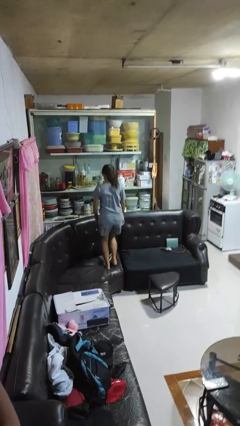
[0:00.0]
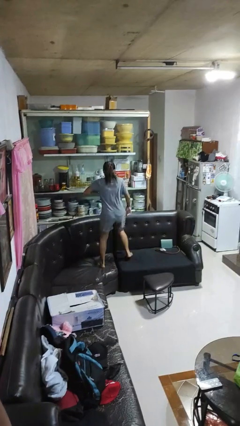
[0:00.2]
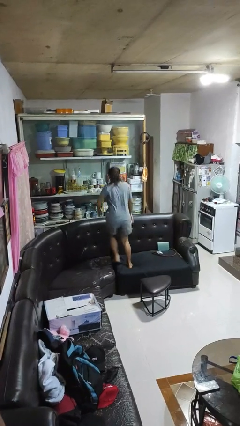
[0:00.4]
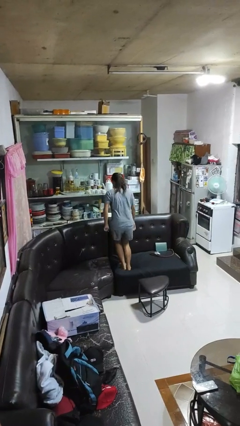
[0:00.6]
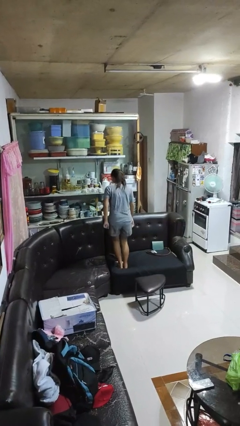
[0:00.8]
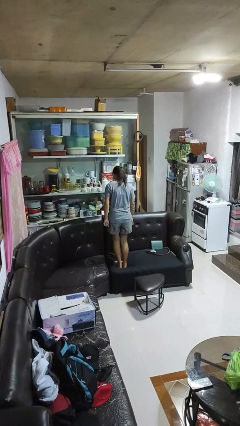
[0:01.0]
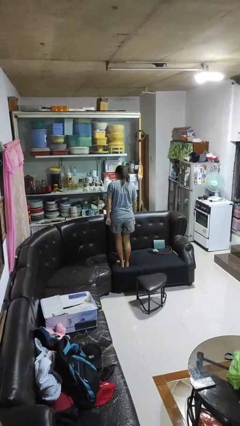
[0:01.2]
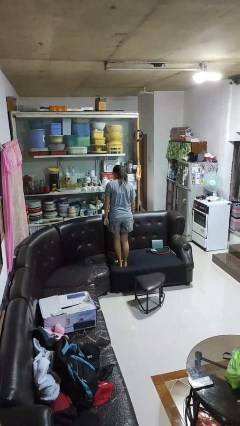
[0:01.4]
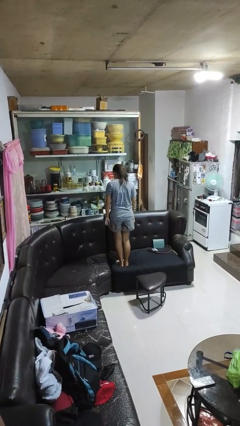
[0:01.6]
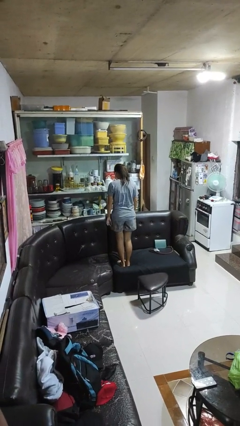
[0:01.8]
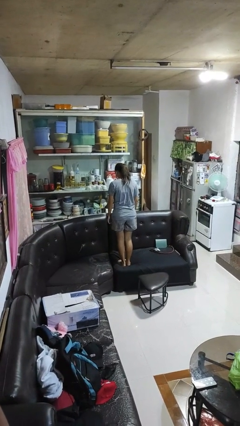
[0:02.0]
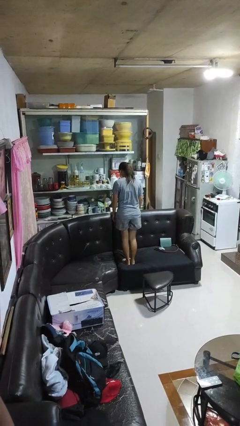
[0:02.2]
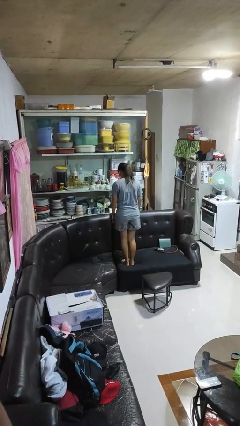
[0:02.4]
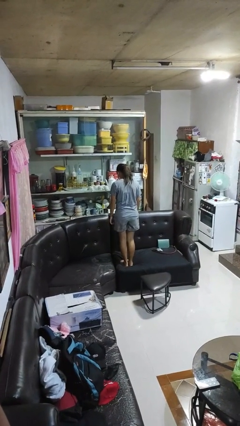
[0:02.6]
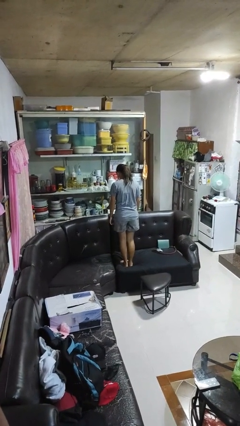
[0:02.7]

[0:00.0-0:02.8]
person jumps on couch

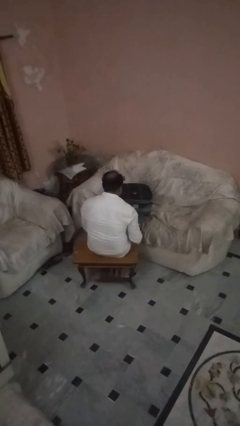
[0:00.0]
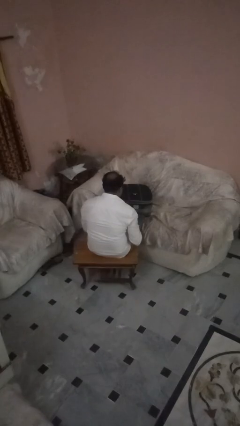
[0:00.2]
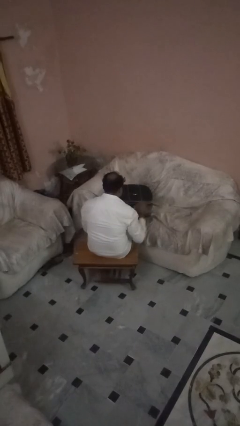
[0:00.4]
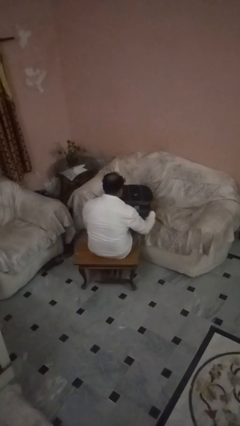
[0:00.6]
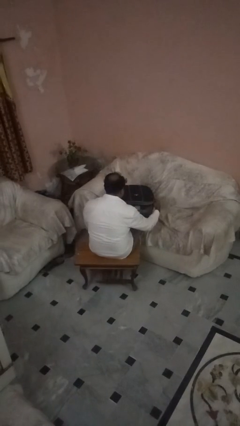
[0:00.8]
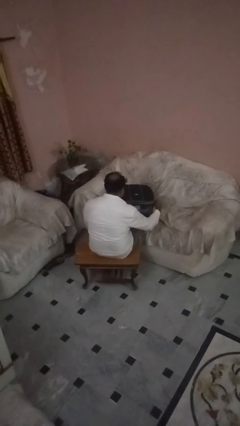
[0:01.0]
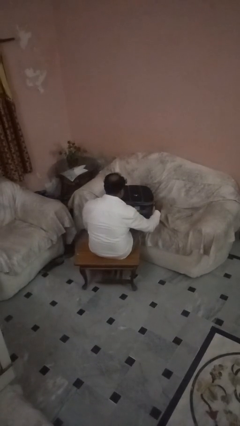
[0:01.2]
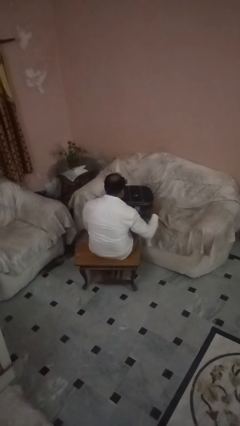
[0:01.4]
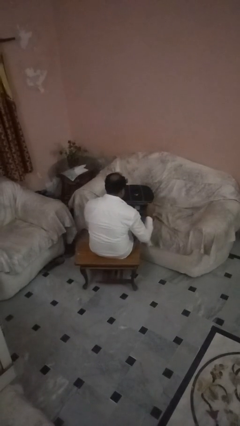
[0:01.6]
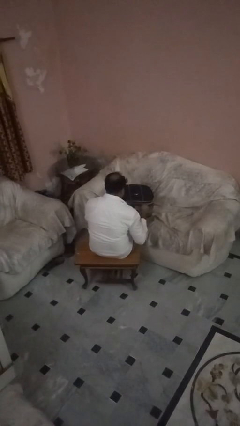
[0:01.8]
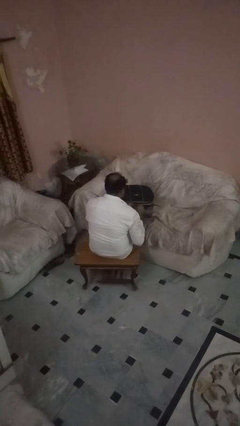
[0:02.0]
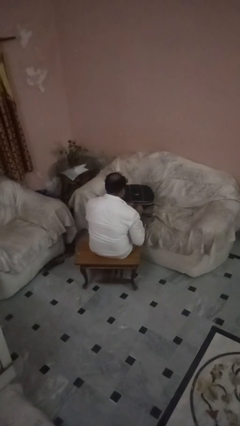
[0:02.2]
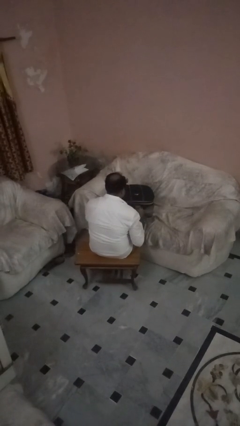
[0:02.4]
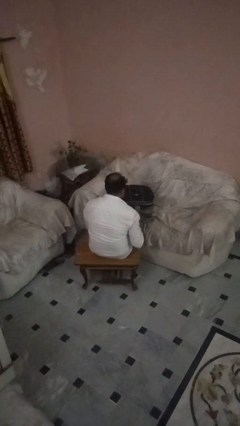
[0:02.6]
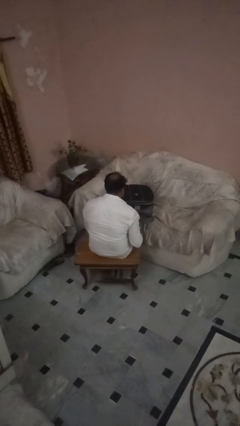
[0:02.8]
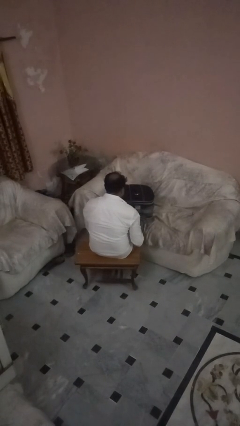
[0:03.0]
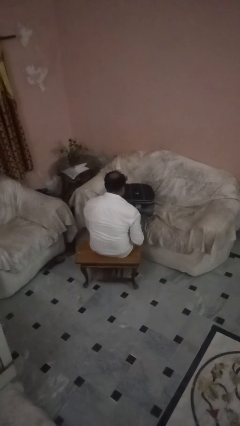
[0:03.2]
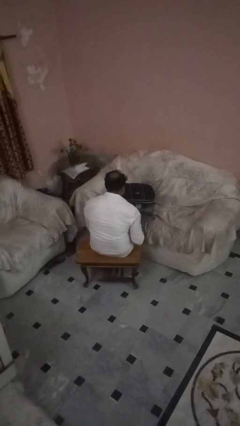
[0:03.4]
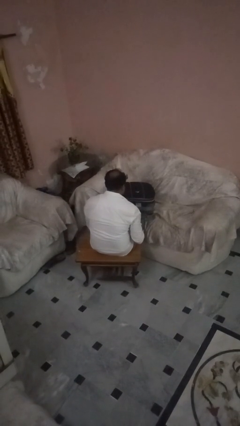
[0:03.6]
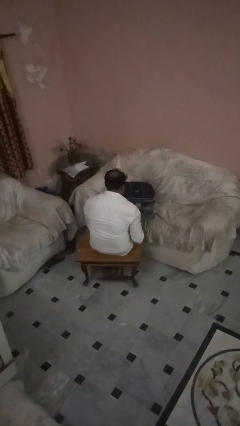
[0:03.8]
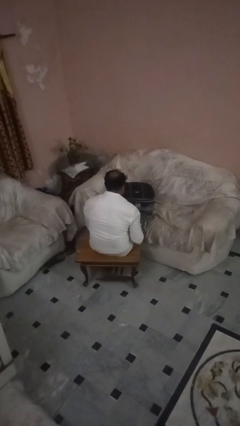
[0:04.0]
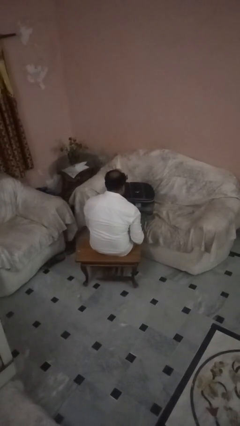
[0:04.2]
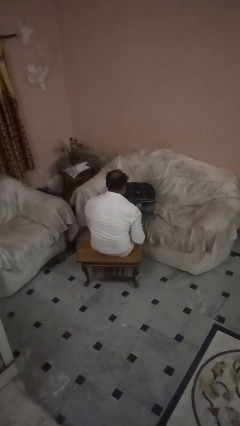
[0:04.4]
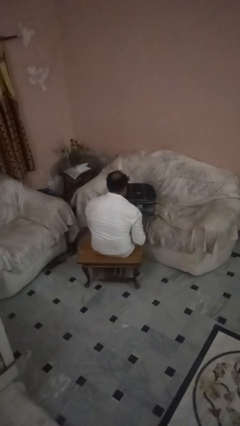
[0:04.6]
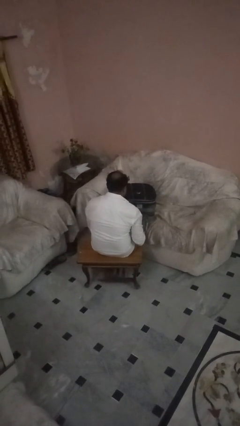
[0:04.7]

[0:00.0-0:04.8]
person closes suitcase

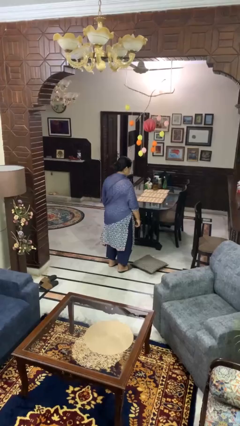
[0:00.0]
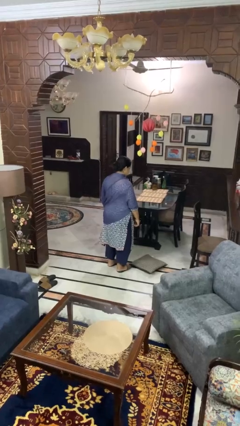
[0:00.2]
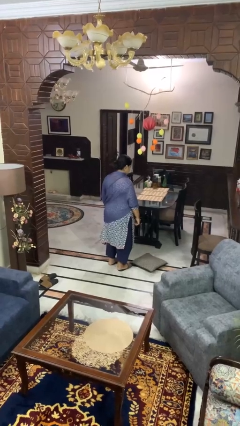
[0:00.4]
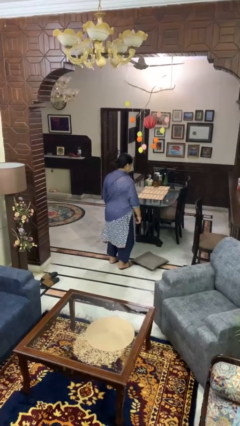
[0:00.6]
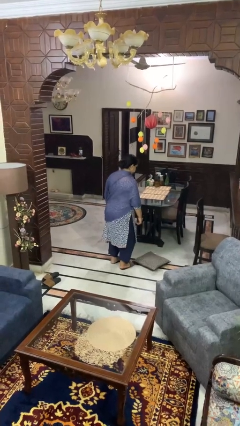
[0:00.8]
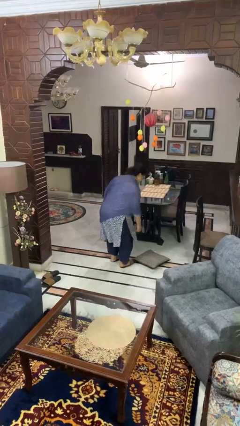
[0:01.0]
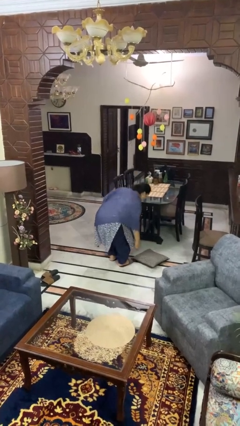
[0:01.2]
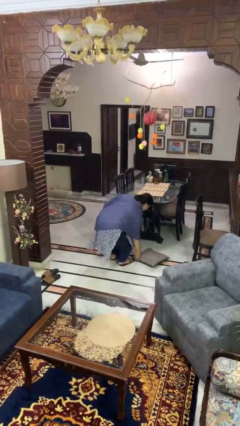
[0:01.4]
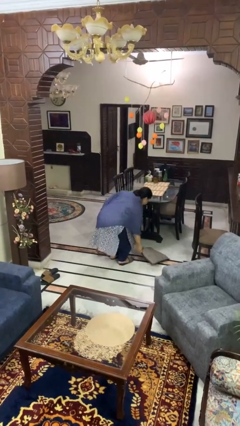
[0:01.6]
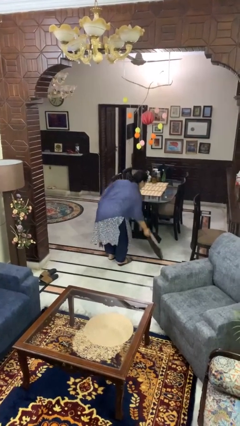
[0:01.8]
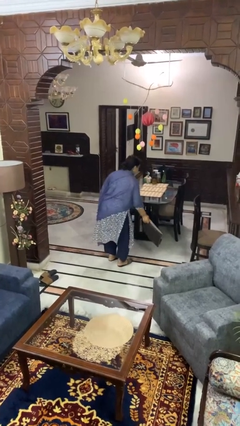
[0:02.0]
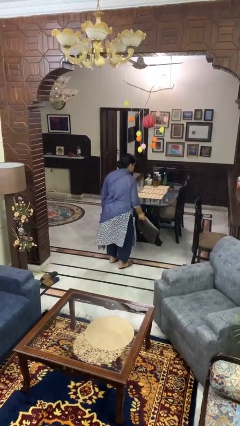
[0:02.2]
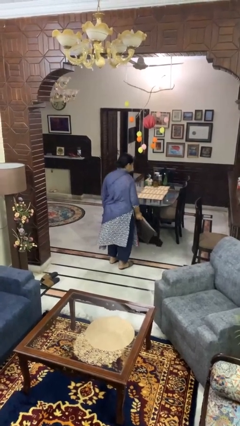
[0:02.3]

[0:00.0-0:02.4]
person picks up object from floor

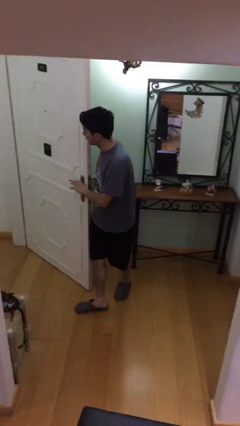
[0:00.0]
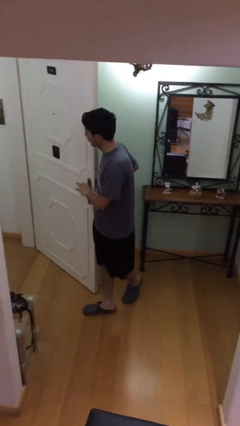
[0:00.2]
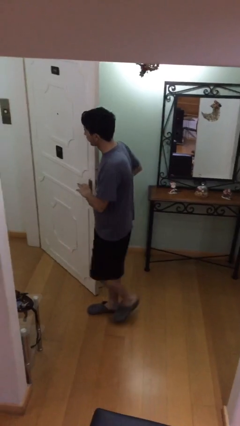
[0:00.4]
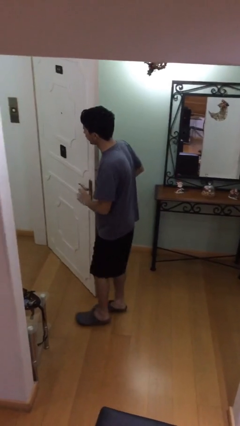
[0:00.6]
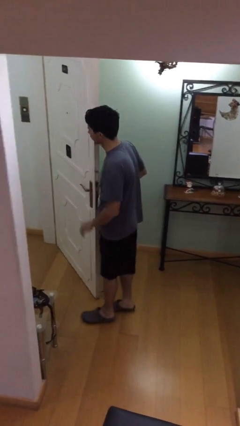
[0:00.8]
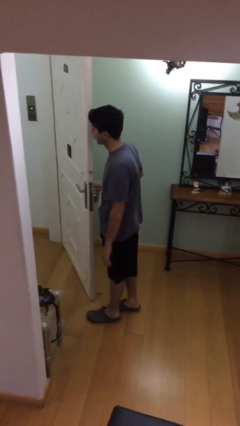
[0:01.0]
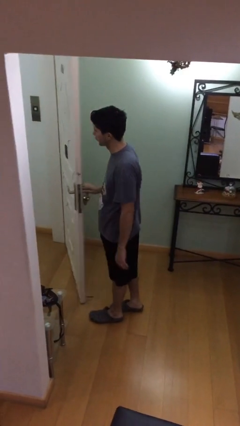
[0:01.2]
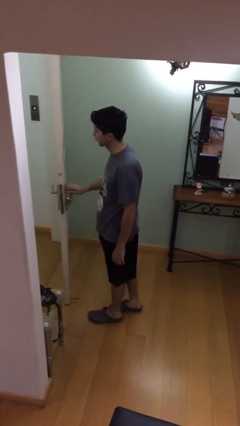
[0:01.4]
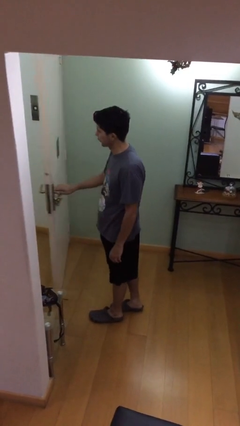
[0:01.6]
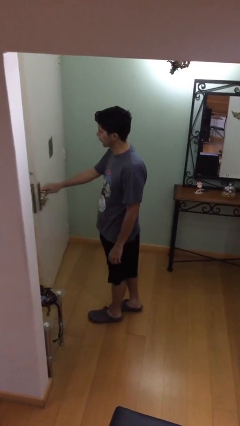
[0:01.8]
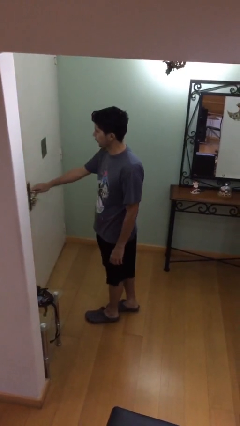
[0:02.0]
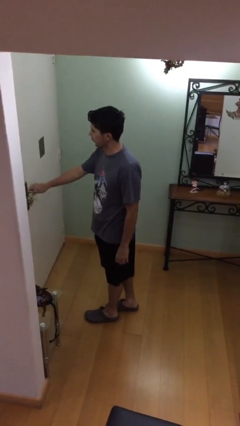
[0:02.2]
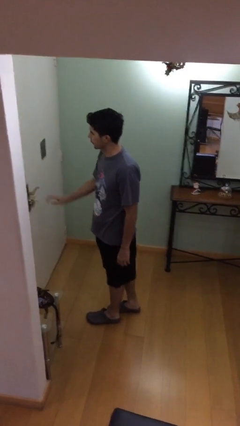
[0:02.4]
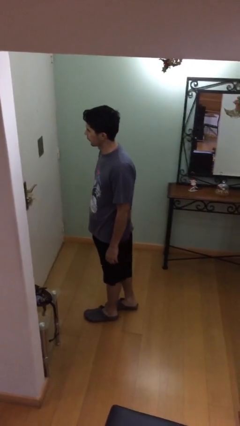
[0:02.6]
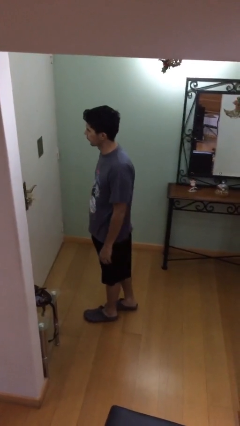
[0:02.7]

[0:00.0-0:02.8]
person closes facility door

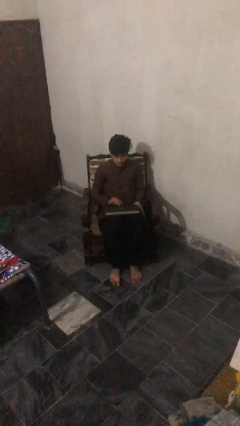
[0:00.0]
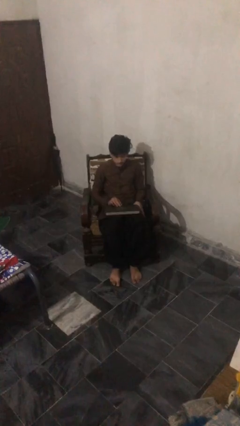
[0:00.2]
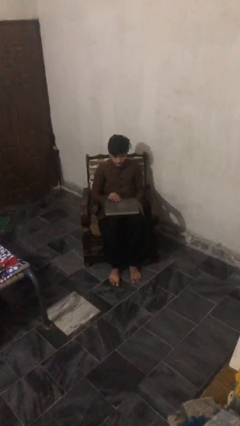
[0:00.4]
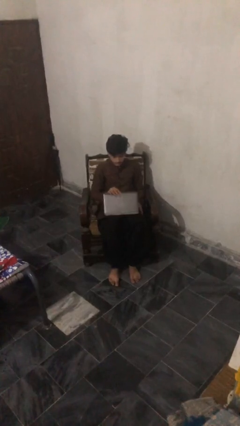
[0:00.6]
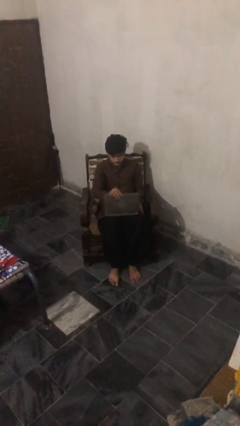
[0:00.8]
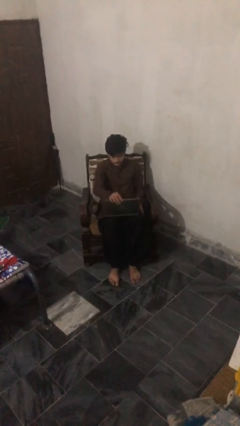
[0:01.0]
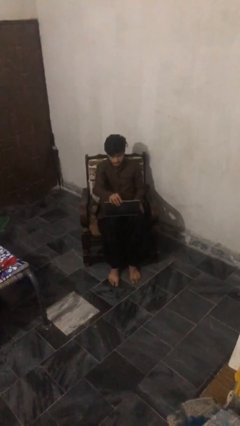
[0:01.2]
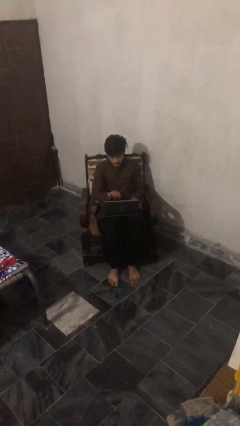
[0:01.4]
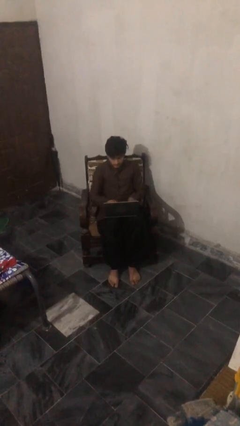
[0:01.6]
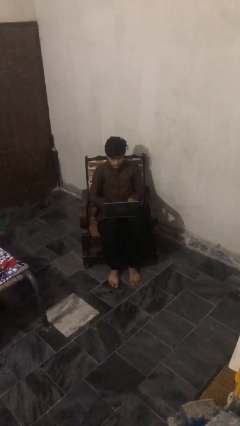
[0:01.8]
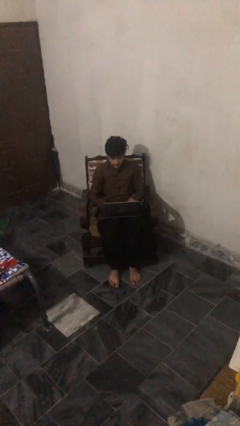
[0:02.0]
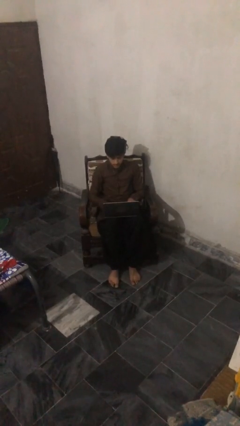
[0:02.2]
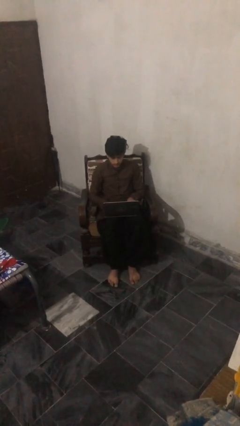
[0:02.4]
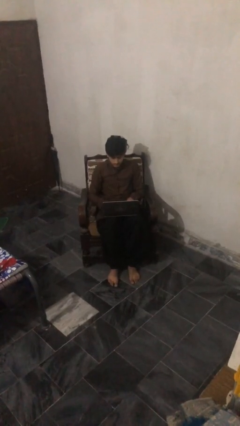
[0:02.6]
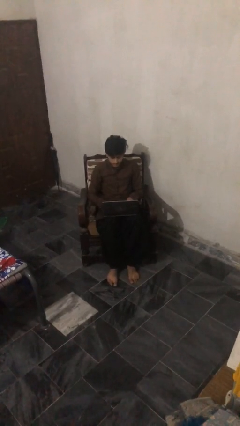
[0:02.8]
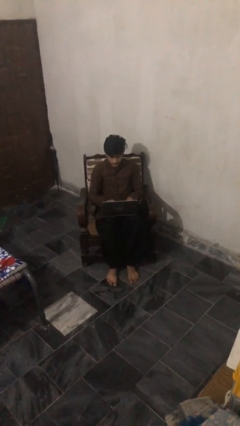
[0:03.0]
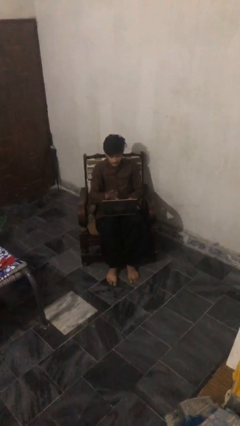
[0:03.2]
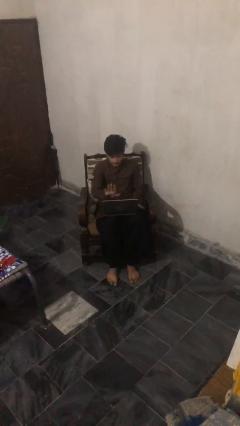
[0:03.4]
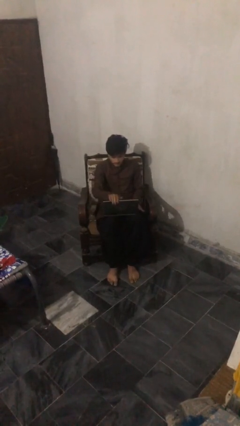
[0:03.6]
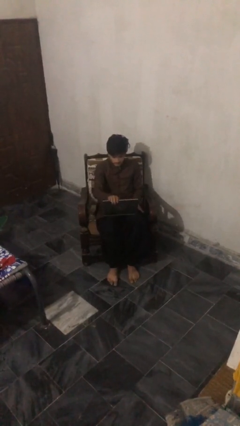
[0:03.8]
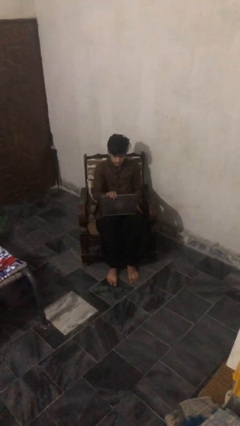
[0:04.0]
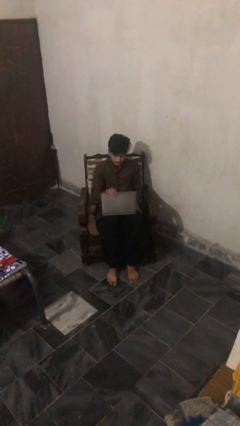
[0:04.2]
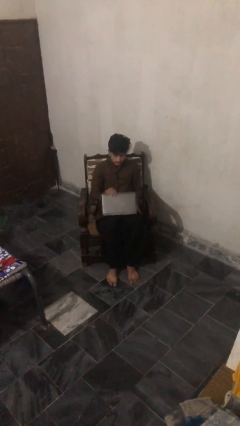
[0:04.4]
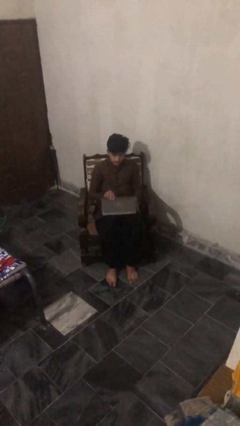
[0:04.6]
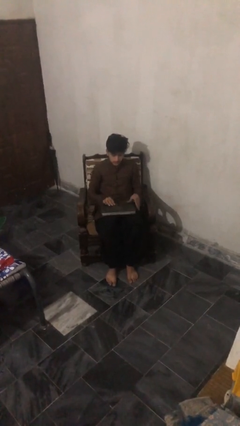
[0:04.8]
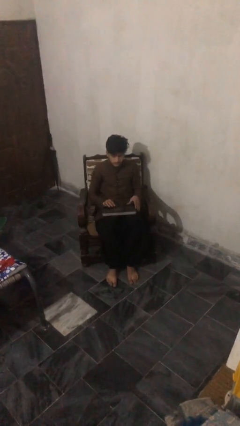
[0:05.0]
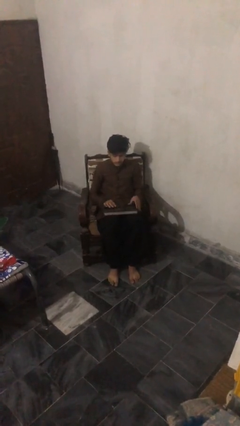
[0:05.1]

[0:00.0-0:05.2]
person interacts with laptop
